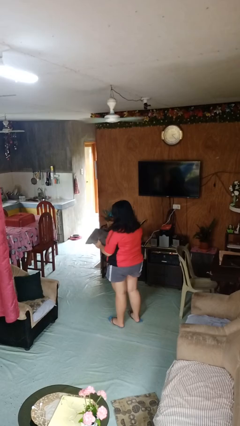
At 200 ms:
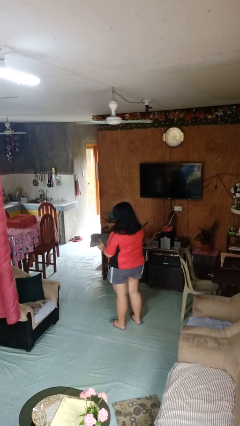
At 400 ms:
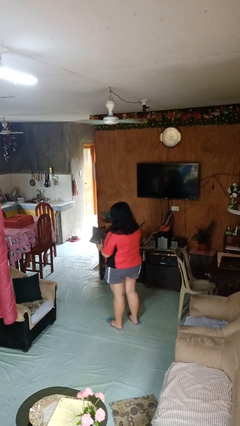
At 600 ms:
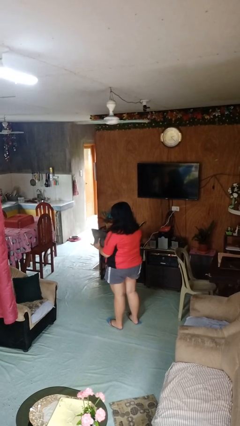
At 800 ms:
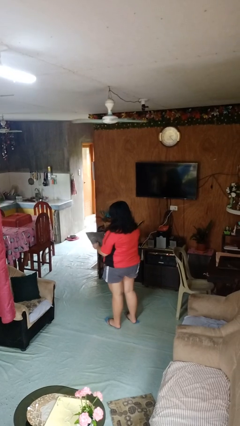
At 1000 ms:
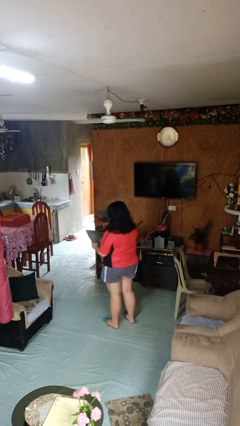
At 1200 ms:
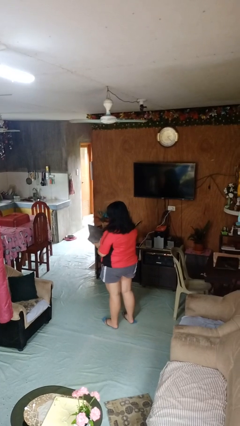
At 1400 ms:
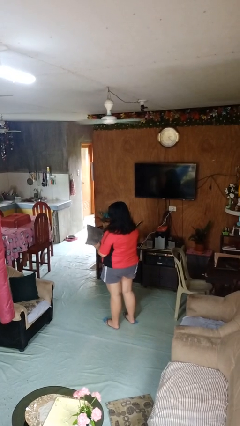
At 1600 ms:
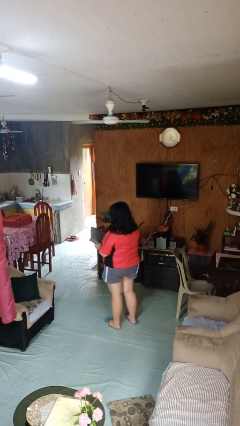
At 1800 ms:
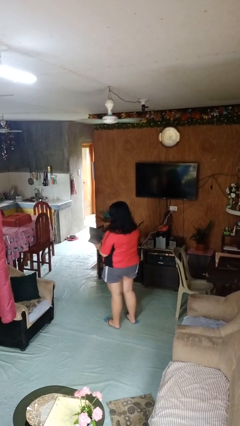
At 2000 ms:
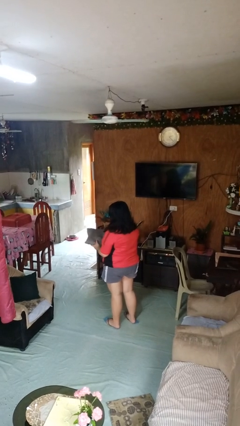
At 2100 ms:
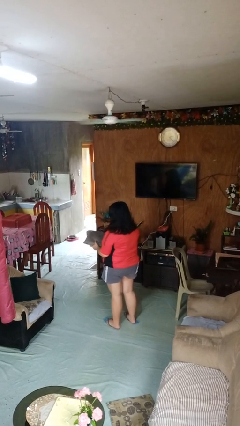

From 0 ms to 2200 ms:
person squeezes object

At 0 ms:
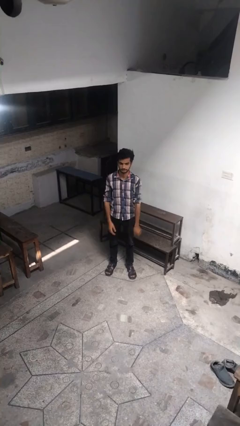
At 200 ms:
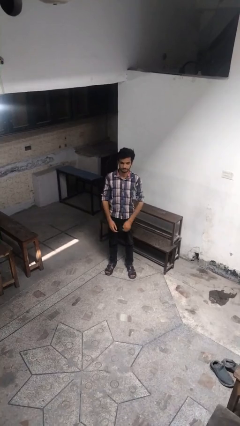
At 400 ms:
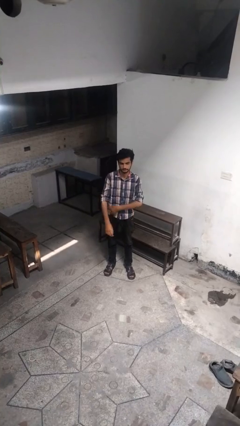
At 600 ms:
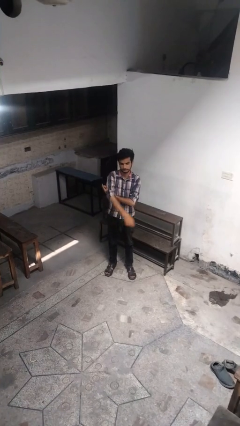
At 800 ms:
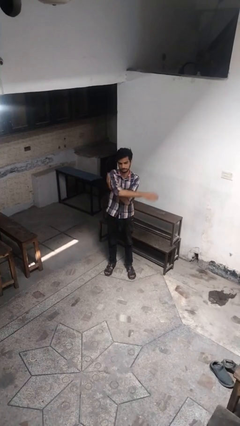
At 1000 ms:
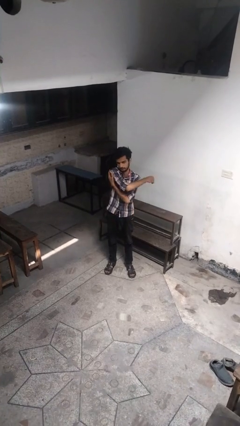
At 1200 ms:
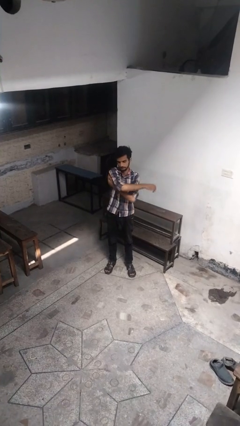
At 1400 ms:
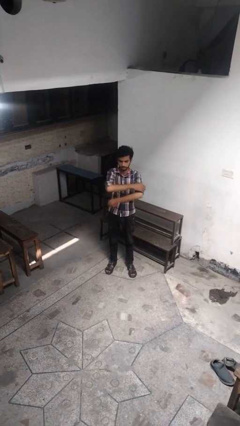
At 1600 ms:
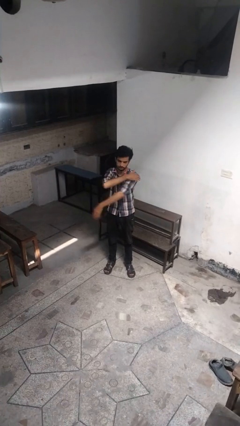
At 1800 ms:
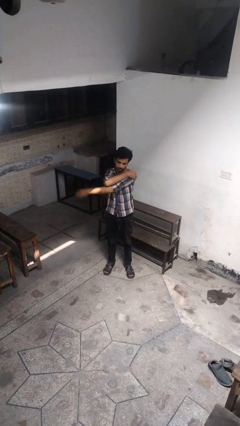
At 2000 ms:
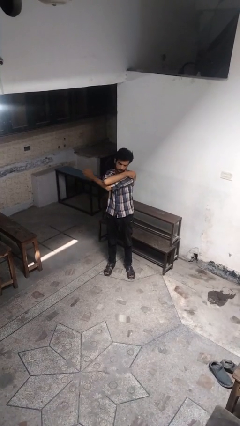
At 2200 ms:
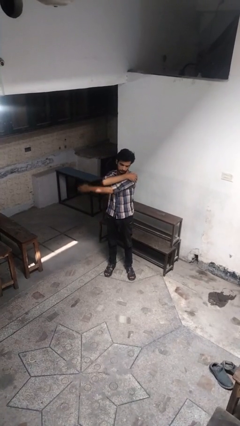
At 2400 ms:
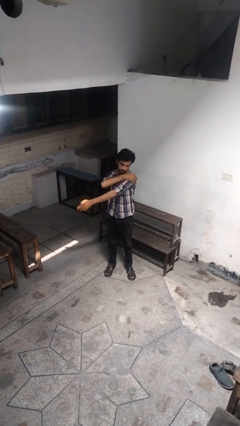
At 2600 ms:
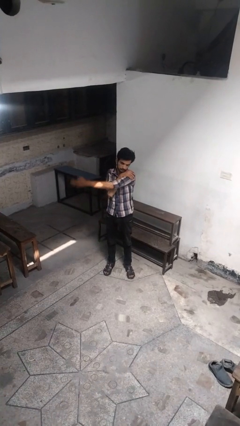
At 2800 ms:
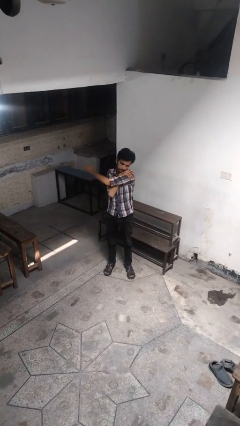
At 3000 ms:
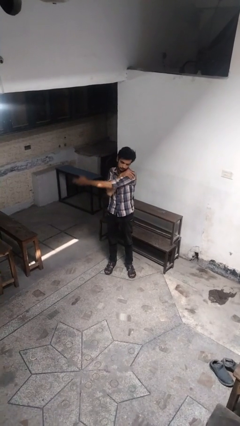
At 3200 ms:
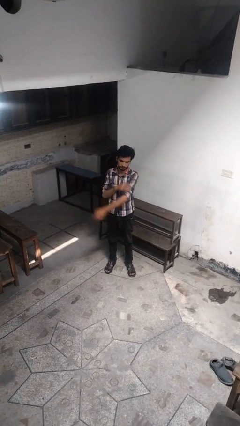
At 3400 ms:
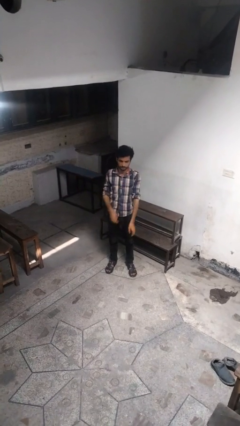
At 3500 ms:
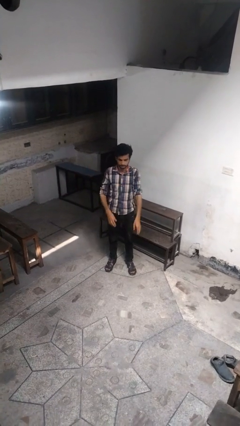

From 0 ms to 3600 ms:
person stretches arms to side

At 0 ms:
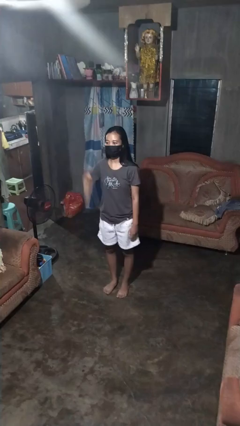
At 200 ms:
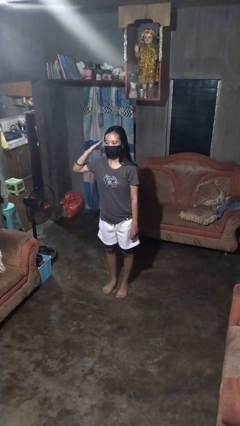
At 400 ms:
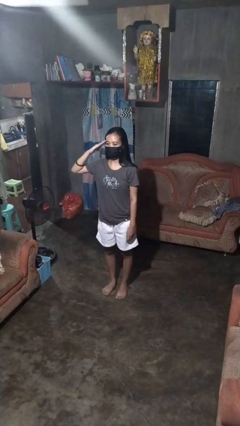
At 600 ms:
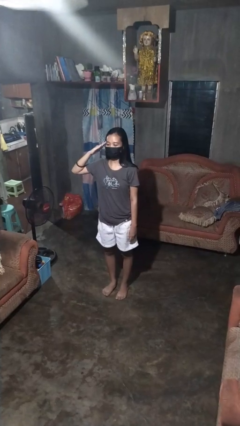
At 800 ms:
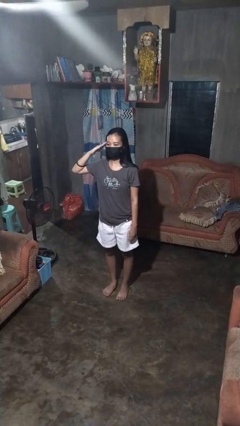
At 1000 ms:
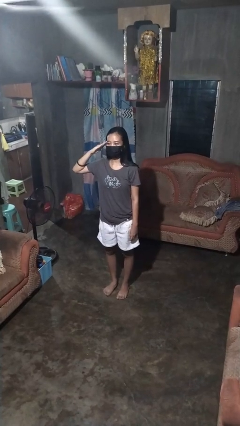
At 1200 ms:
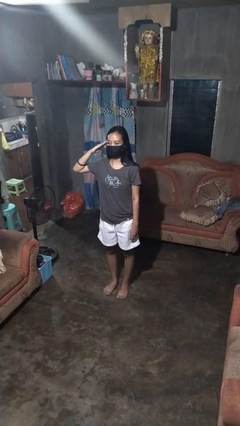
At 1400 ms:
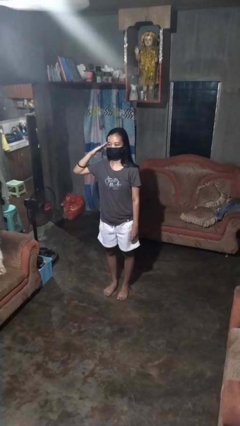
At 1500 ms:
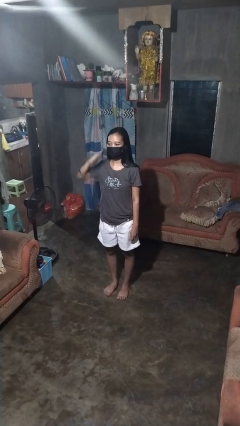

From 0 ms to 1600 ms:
person salutes

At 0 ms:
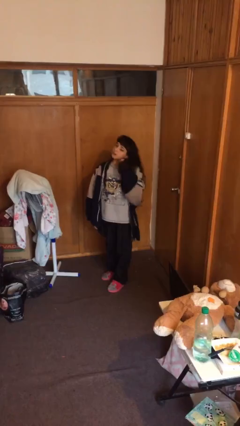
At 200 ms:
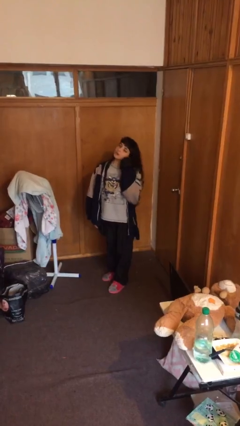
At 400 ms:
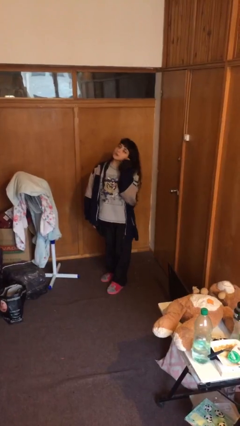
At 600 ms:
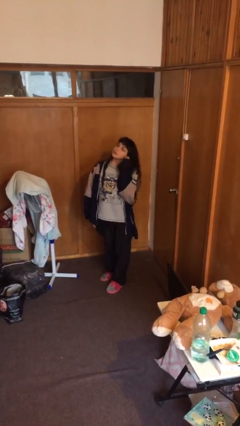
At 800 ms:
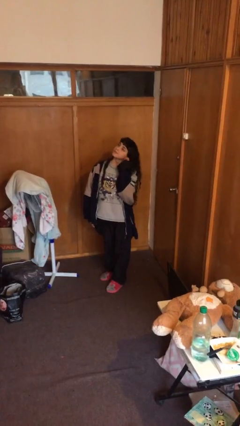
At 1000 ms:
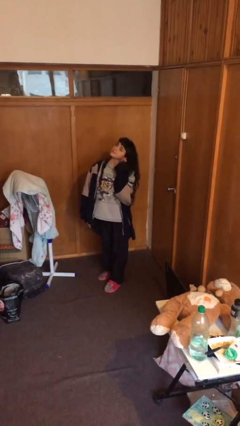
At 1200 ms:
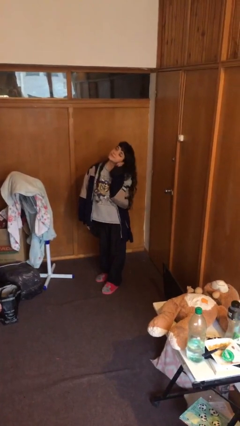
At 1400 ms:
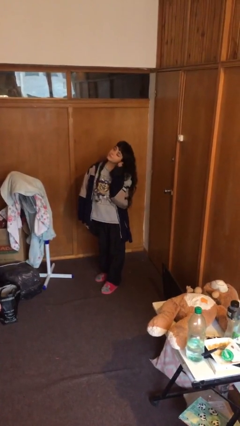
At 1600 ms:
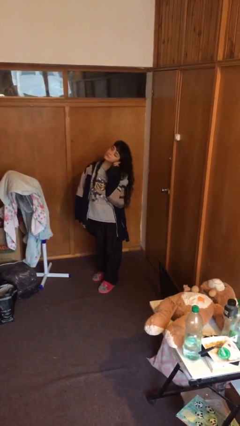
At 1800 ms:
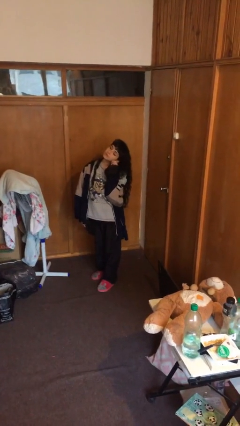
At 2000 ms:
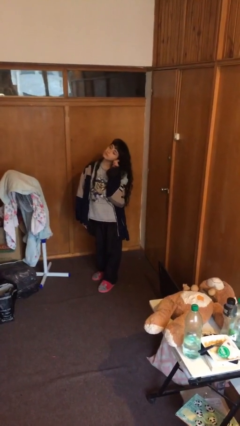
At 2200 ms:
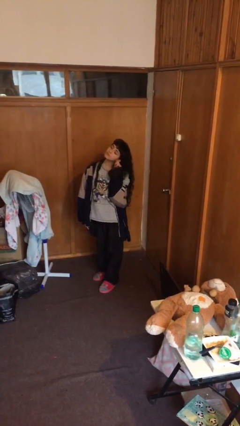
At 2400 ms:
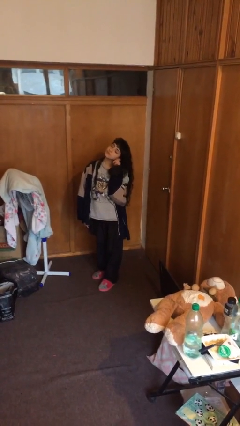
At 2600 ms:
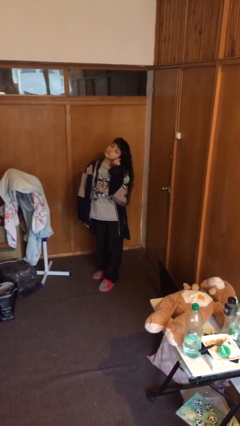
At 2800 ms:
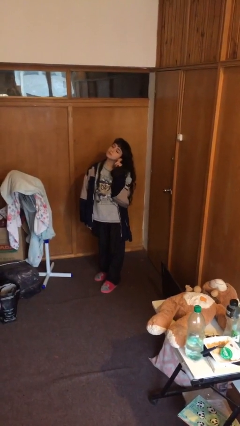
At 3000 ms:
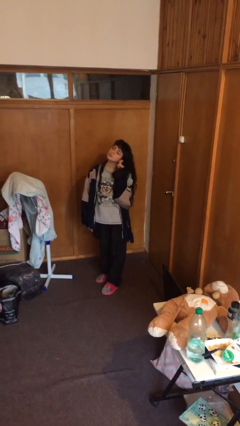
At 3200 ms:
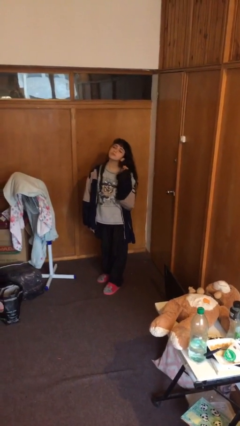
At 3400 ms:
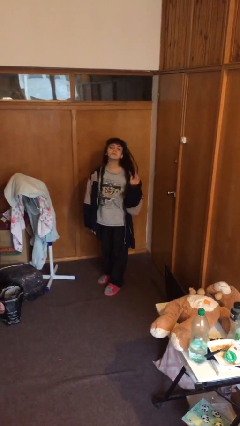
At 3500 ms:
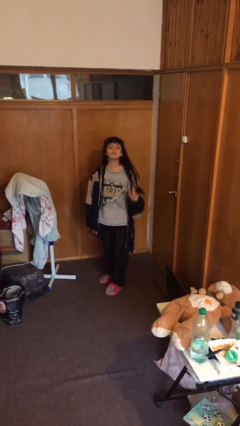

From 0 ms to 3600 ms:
person touches earlobe

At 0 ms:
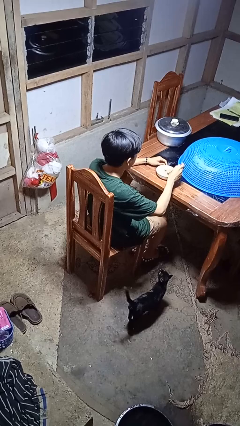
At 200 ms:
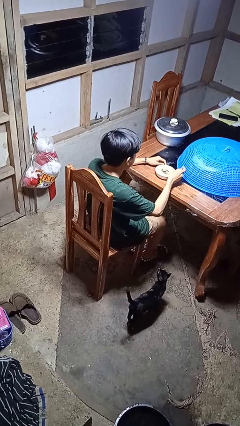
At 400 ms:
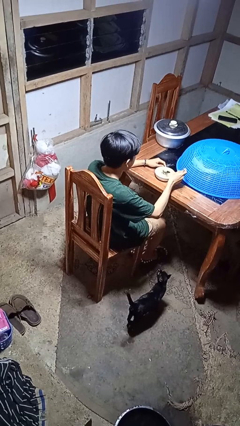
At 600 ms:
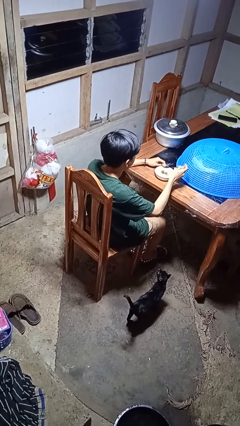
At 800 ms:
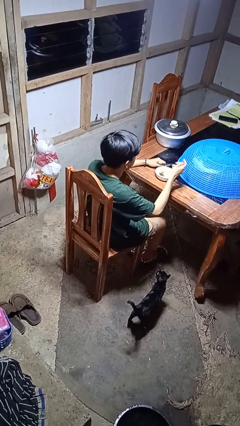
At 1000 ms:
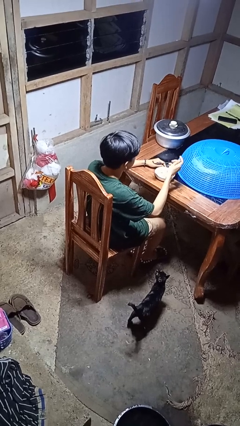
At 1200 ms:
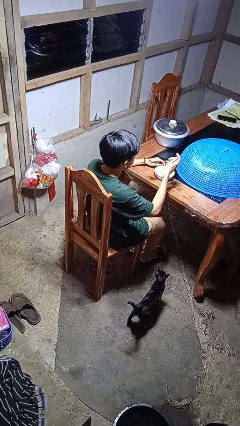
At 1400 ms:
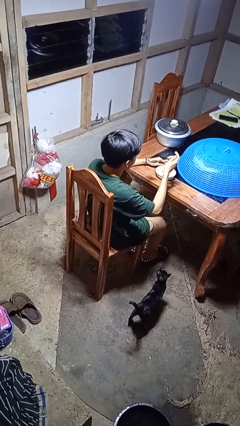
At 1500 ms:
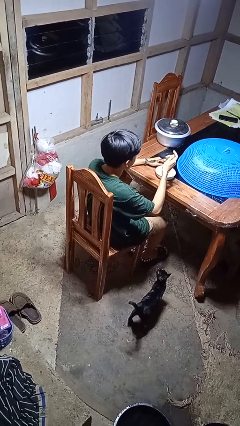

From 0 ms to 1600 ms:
person eats with utensil

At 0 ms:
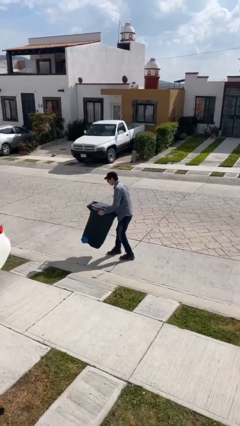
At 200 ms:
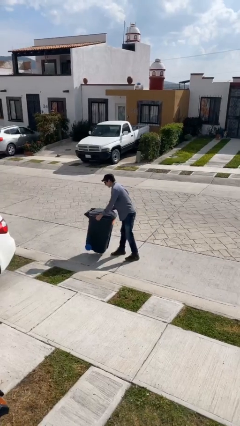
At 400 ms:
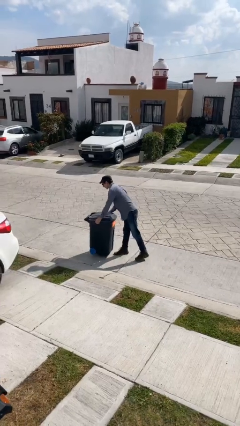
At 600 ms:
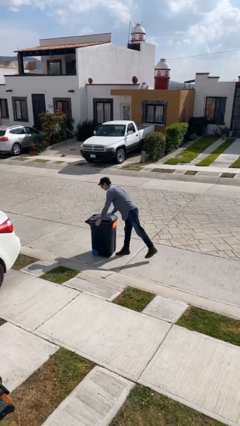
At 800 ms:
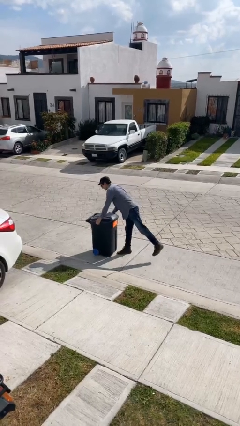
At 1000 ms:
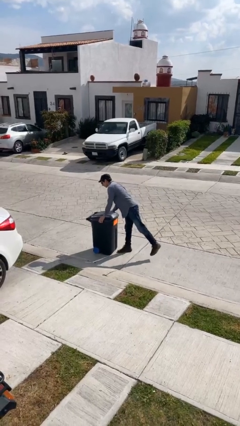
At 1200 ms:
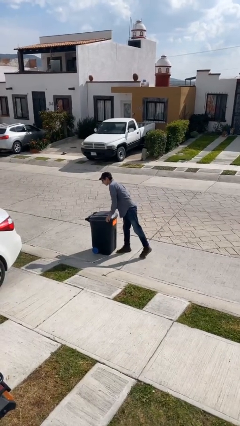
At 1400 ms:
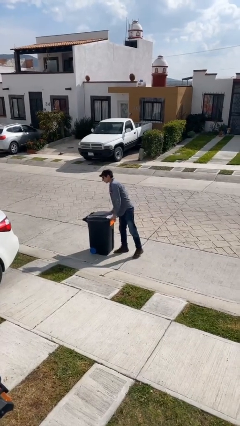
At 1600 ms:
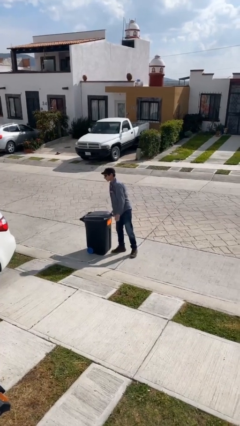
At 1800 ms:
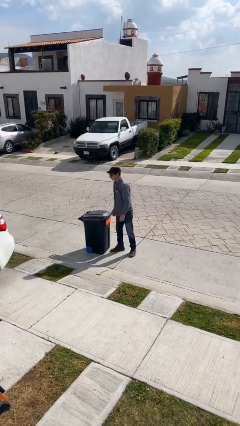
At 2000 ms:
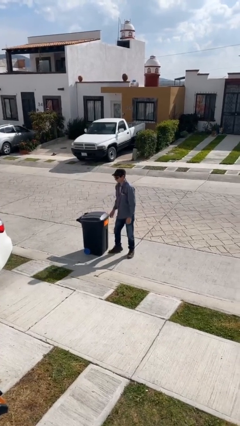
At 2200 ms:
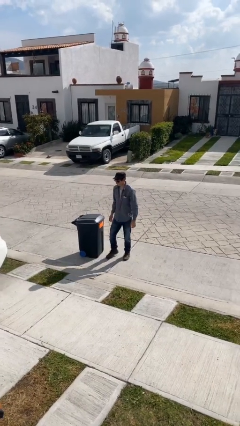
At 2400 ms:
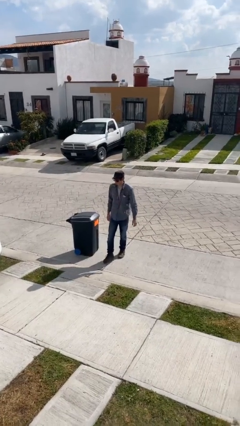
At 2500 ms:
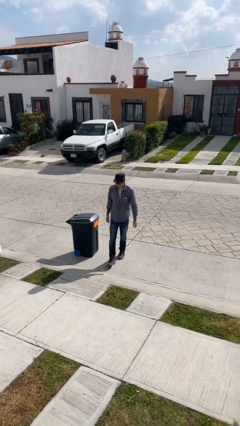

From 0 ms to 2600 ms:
person puts down object on floor

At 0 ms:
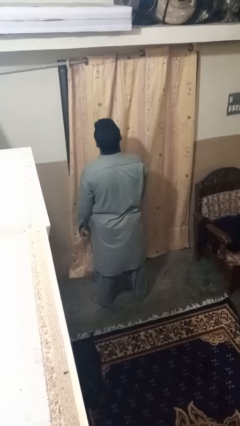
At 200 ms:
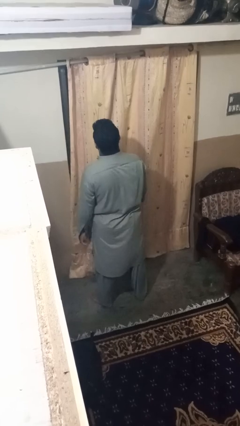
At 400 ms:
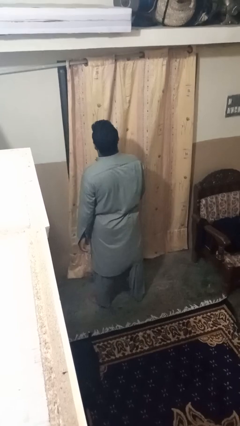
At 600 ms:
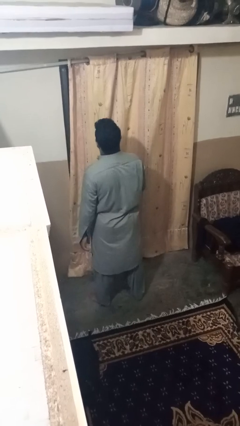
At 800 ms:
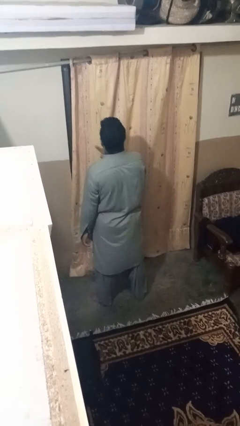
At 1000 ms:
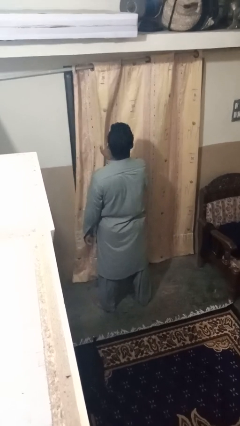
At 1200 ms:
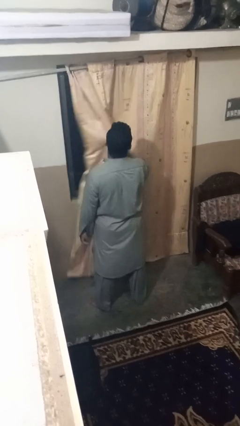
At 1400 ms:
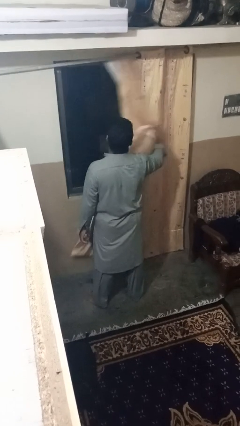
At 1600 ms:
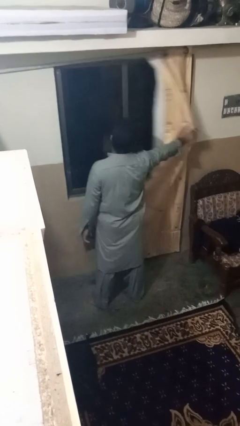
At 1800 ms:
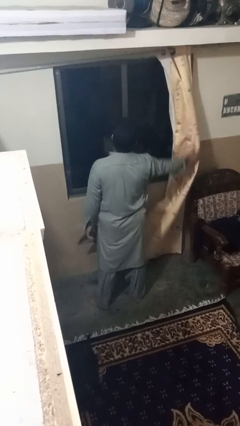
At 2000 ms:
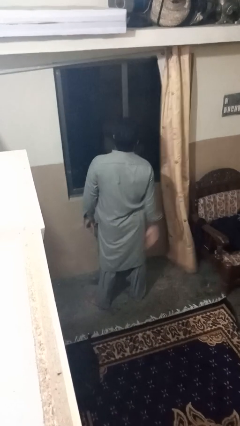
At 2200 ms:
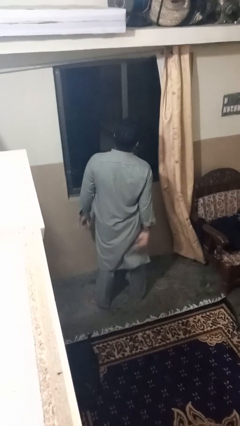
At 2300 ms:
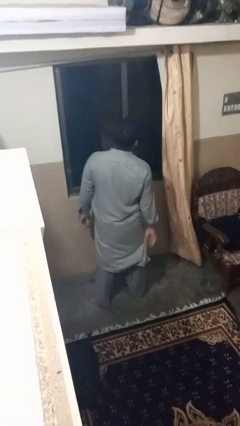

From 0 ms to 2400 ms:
person opens curtains
